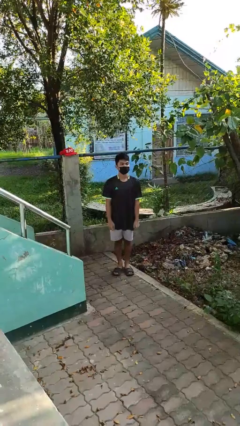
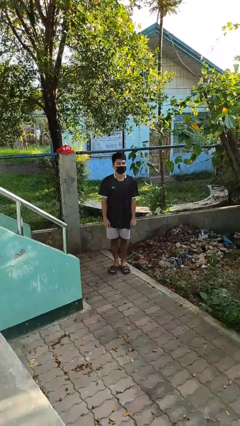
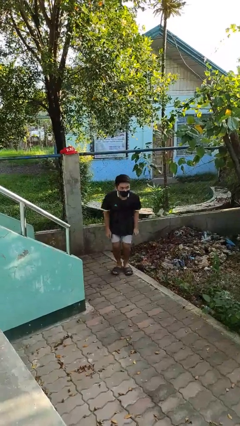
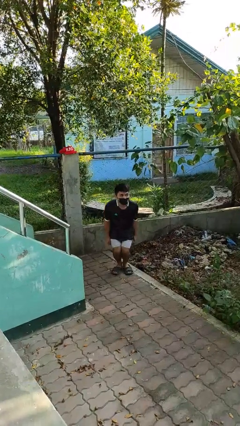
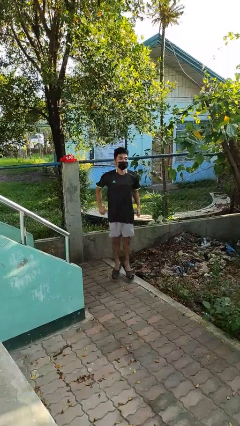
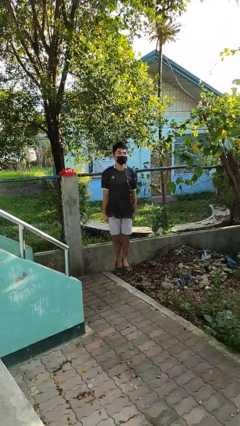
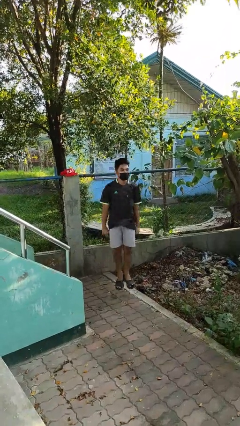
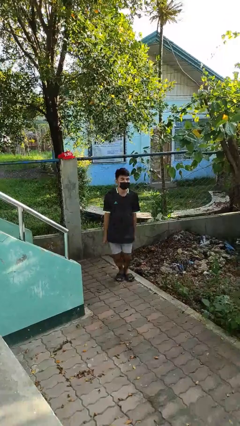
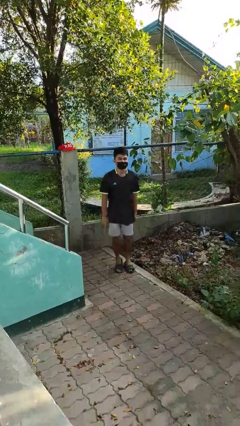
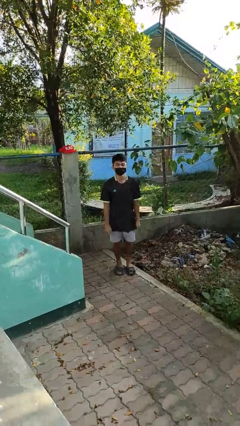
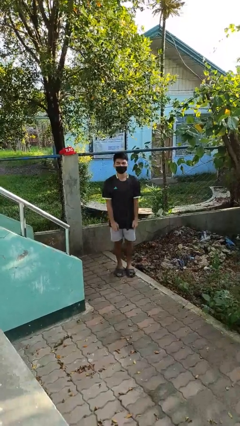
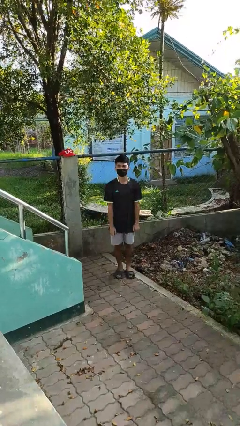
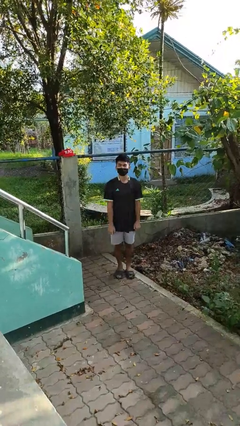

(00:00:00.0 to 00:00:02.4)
person jumps

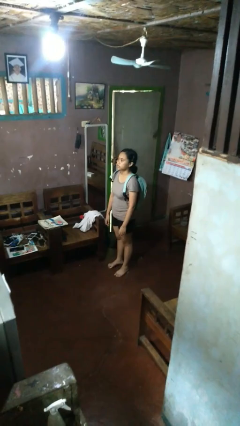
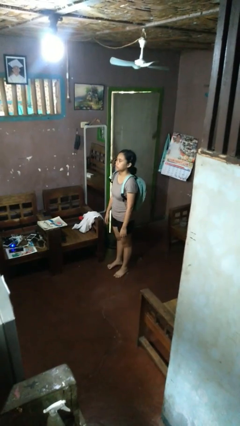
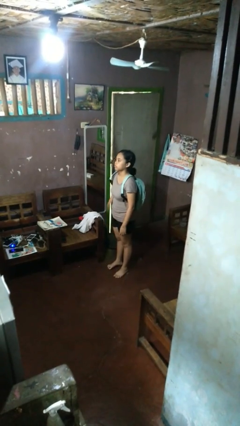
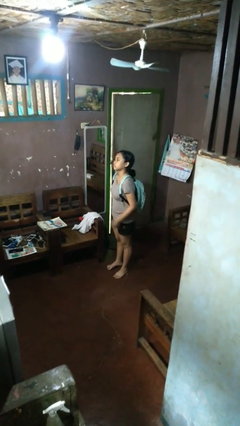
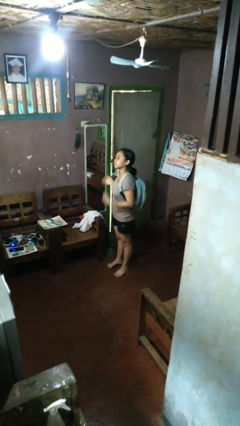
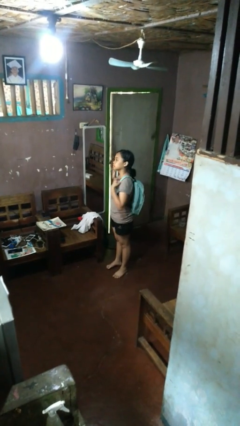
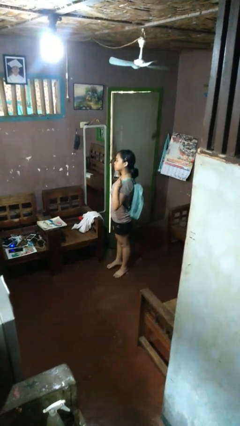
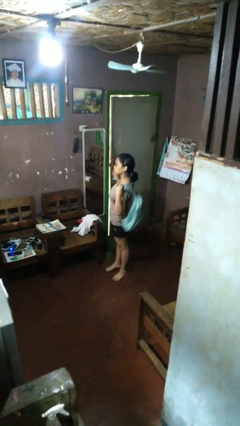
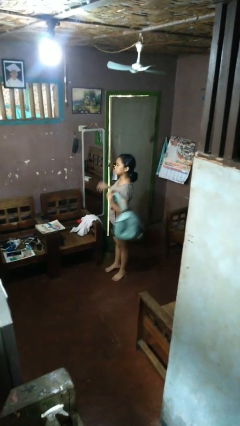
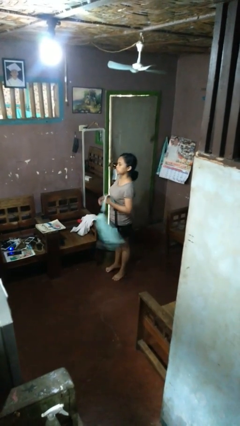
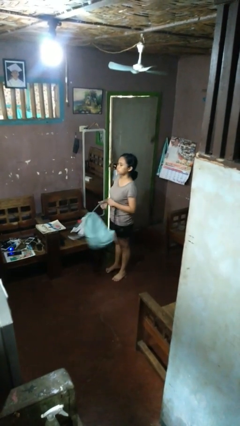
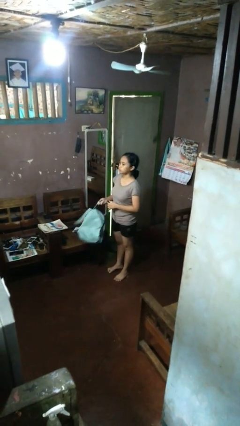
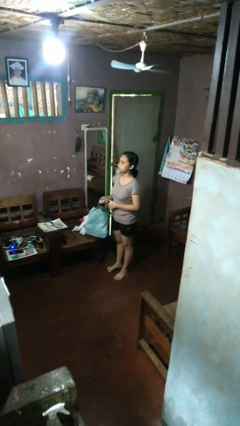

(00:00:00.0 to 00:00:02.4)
person takes off backpack

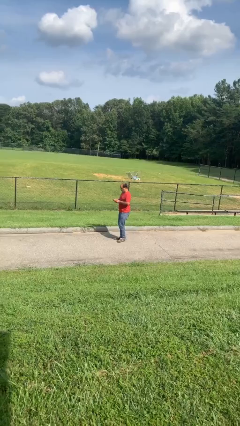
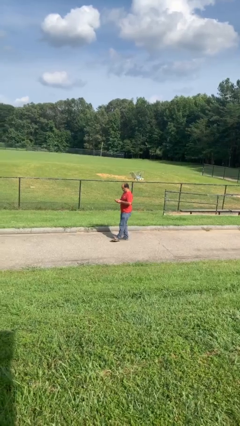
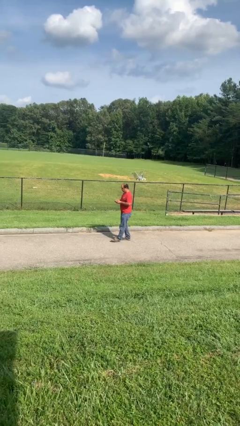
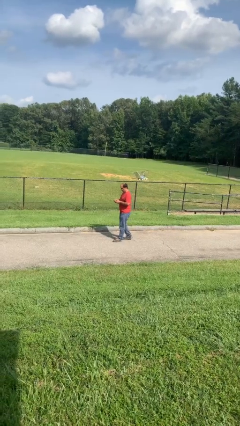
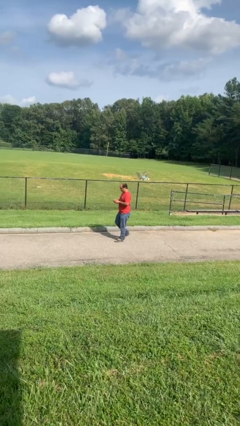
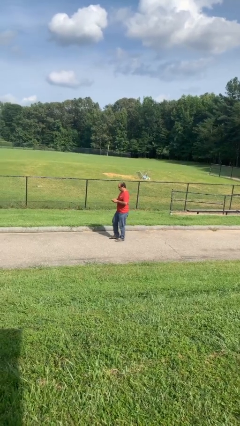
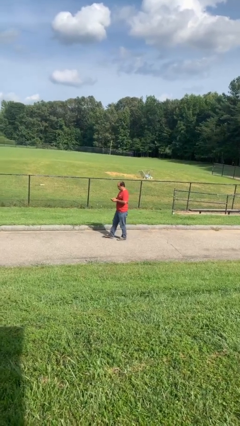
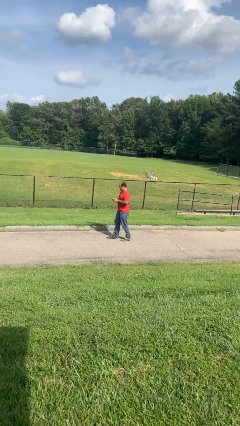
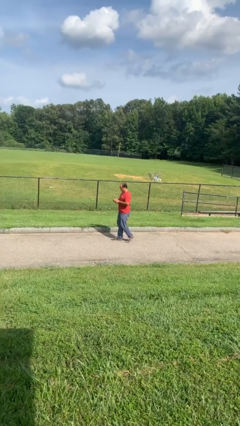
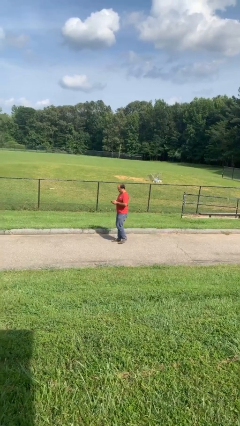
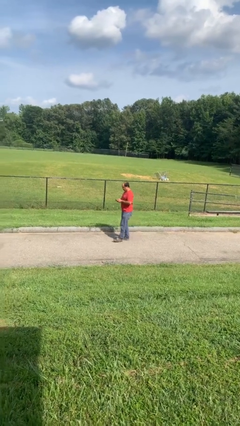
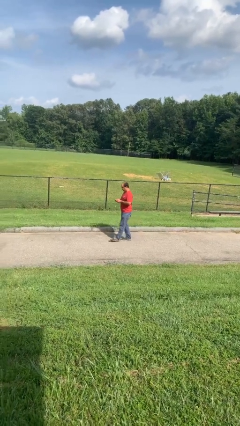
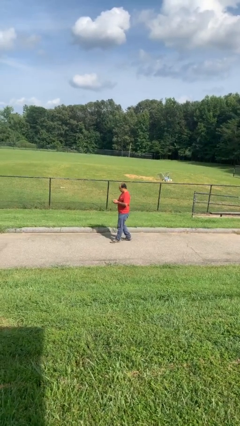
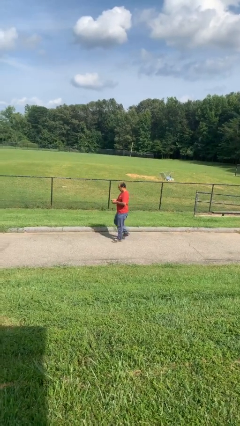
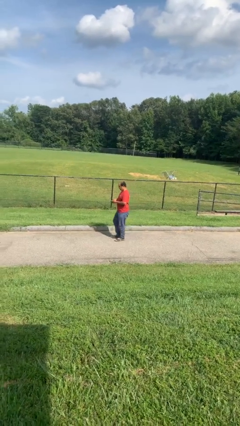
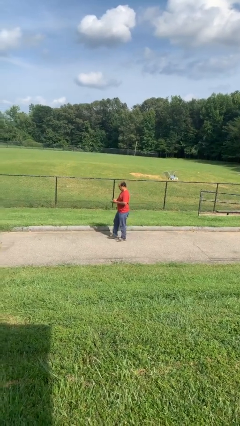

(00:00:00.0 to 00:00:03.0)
person texts on phone

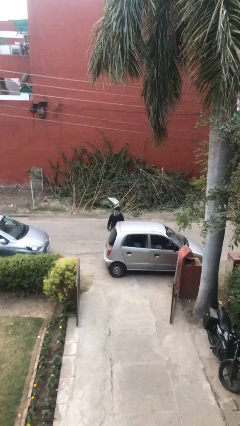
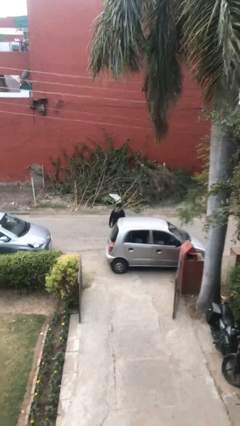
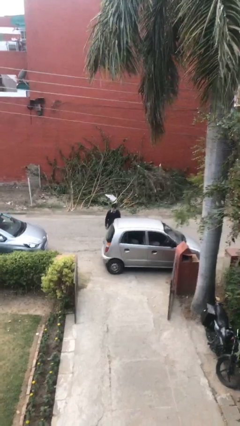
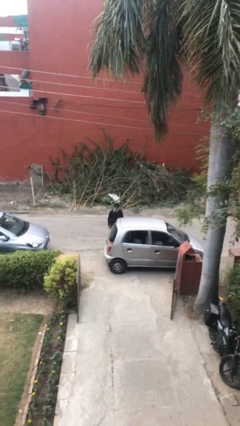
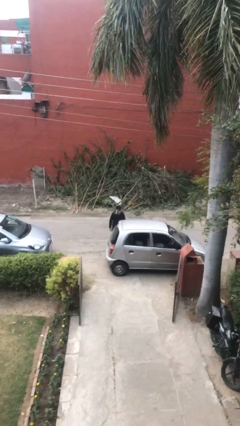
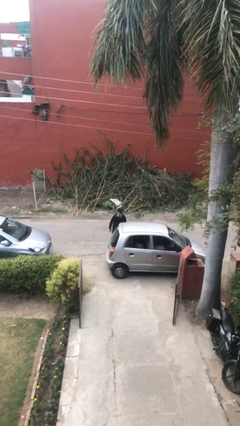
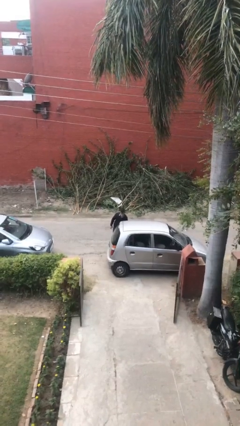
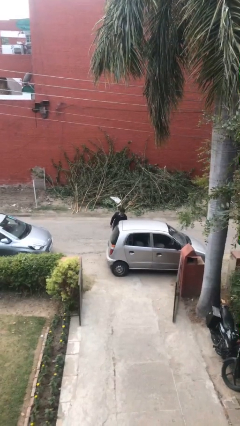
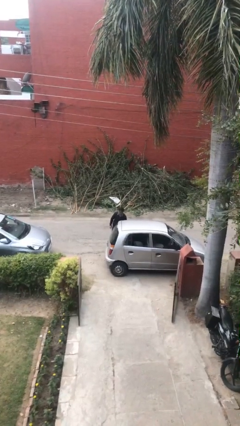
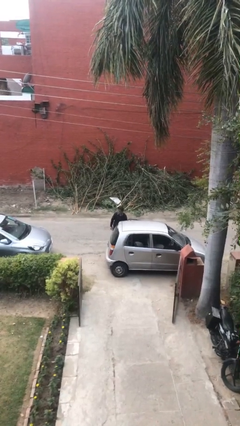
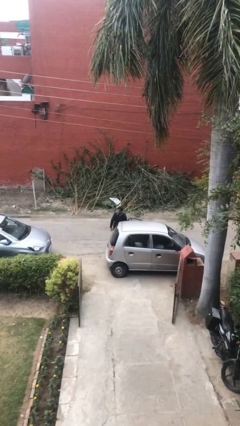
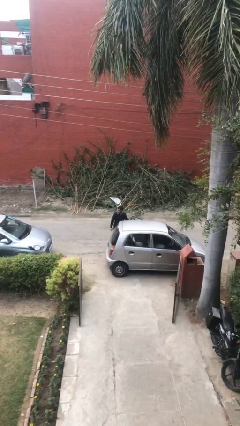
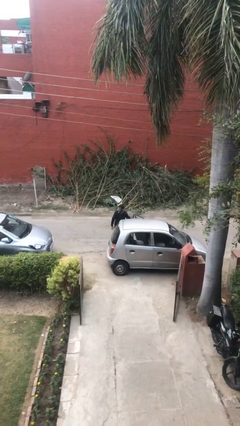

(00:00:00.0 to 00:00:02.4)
person opens car door

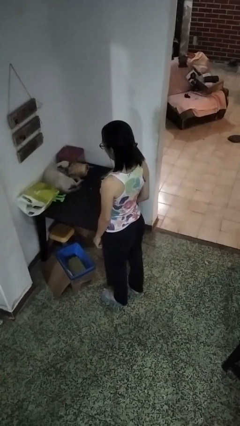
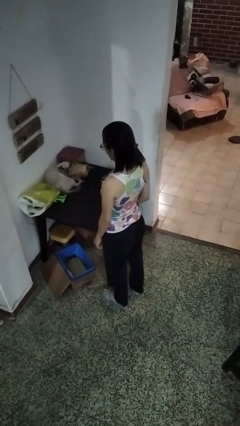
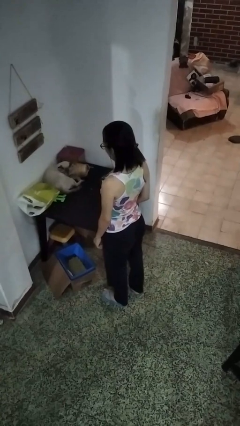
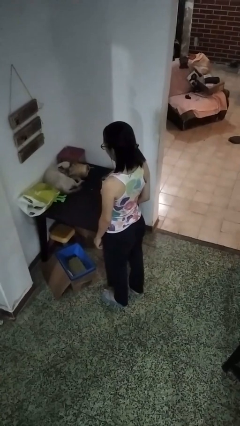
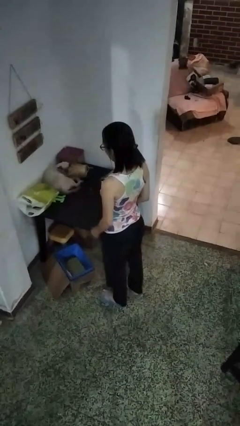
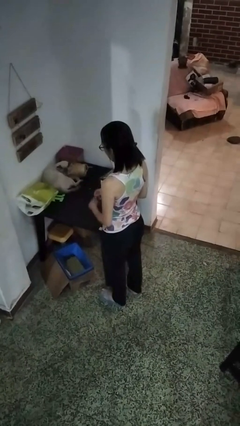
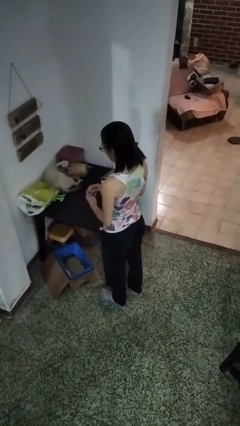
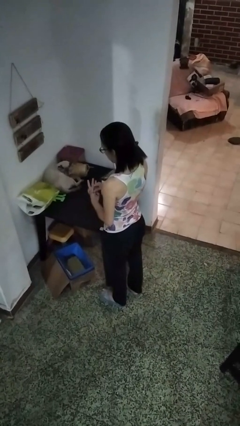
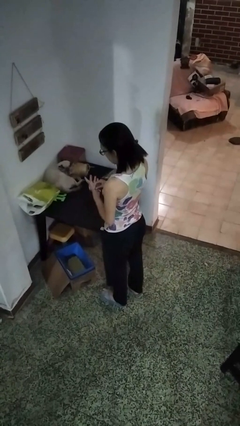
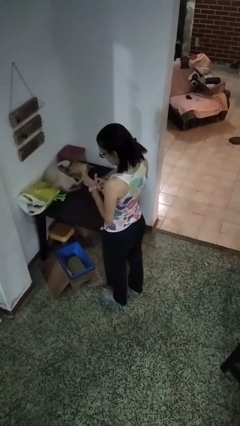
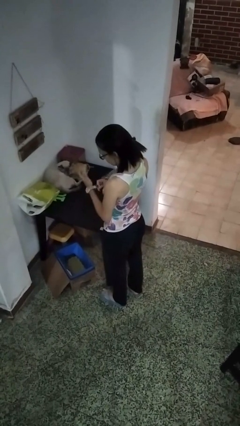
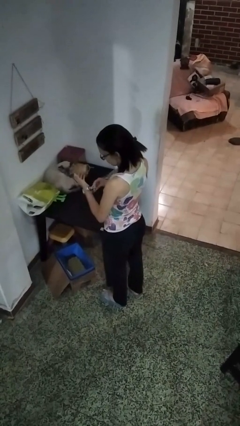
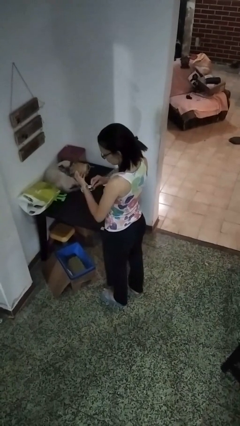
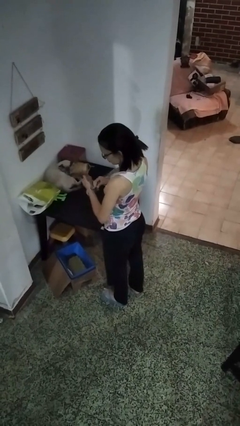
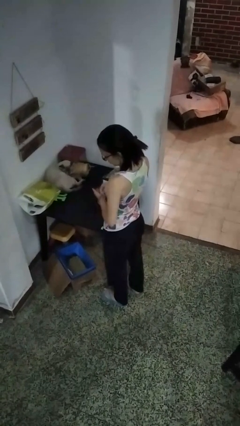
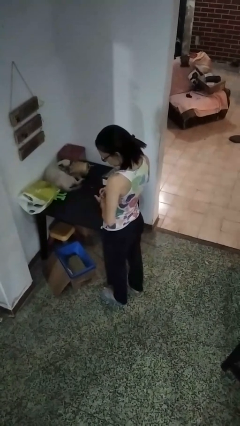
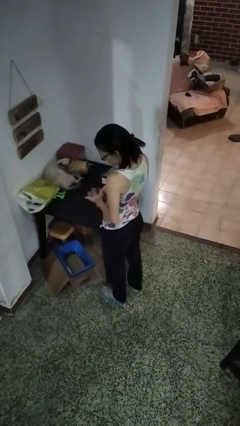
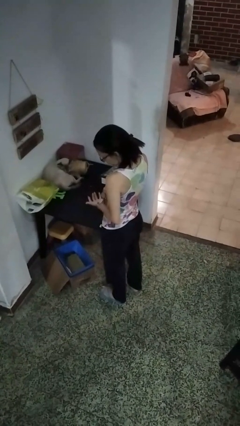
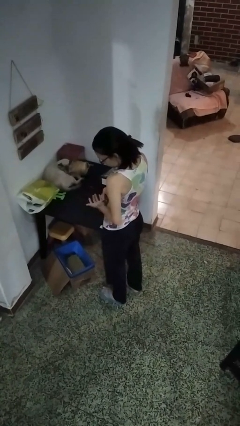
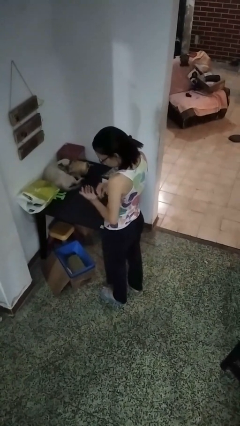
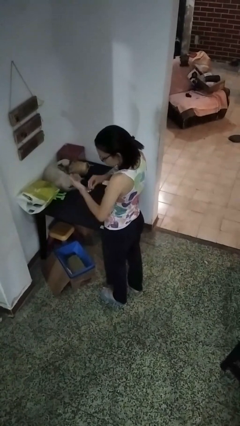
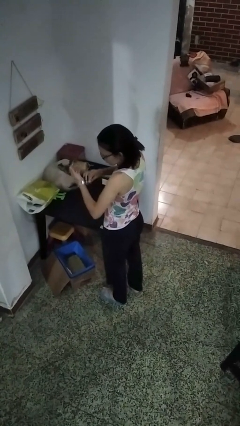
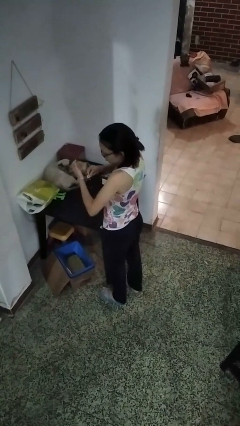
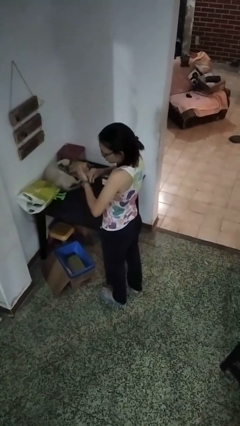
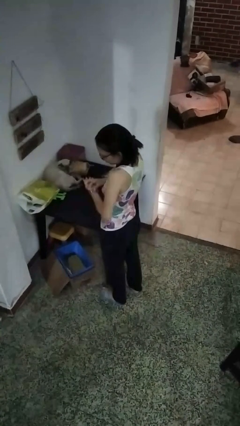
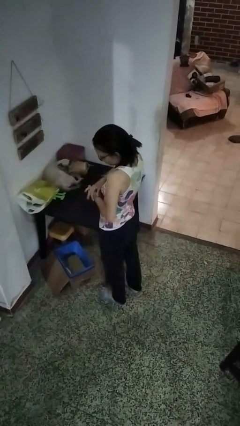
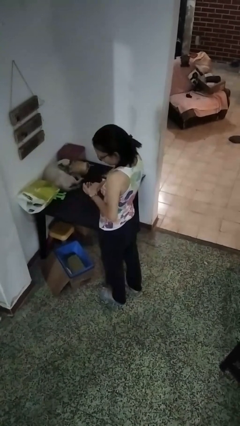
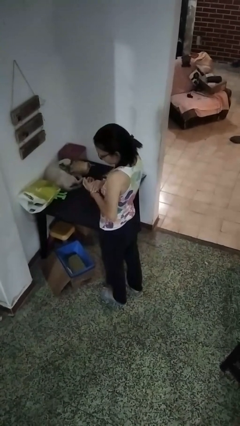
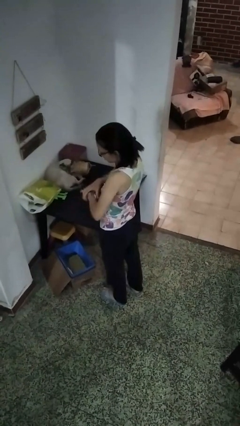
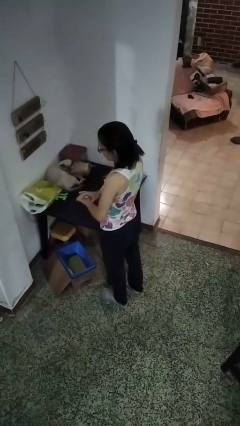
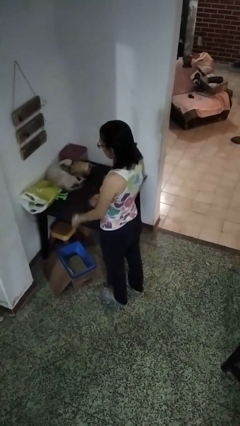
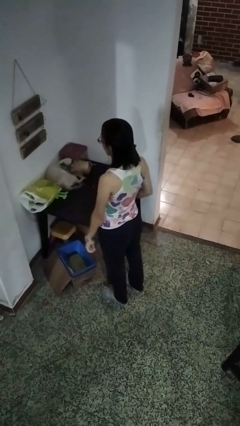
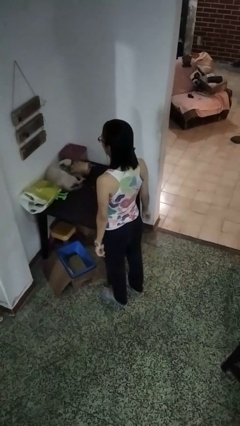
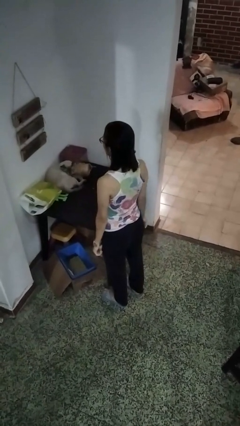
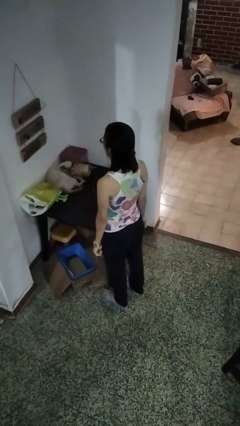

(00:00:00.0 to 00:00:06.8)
person puts on wristwatch

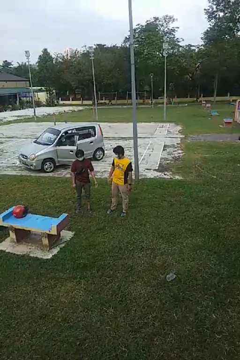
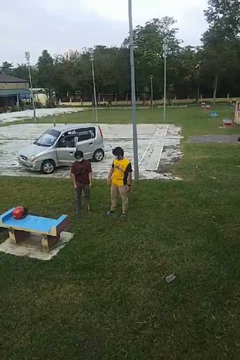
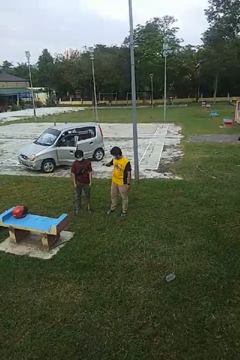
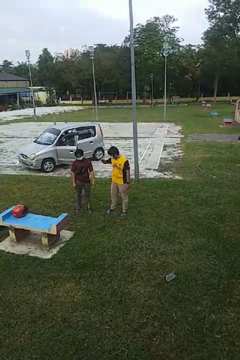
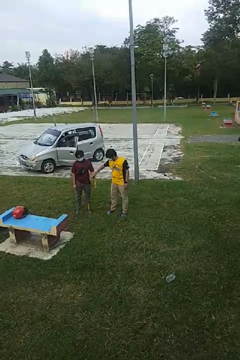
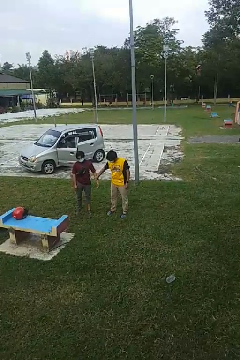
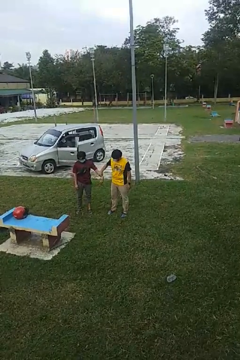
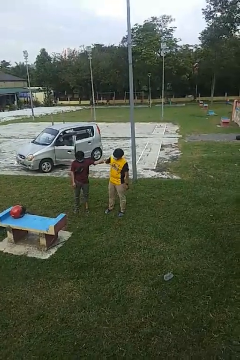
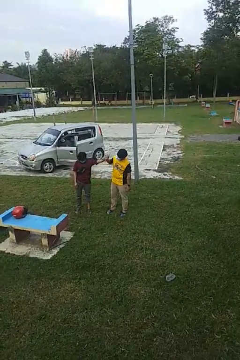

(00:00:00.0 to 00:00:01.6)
person grabs person by forearm
